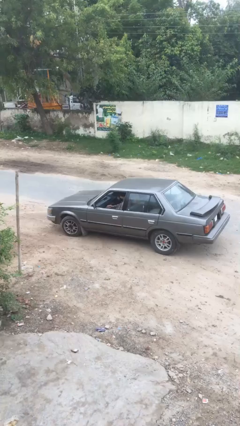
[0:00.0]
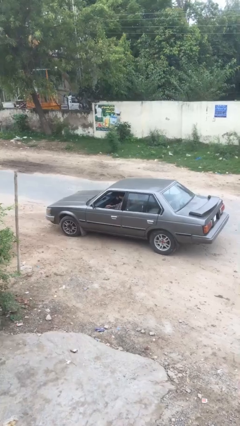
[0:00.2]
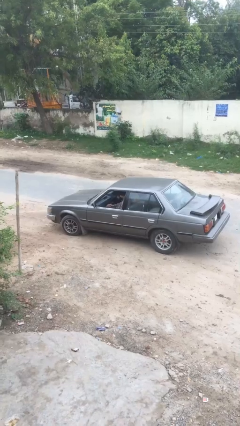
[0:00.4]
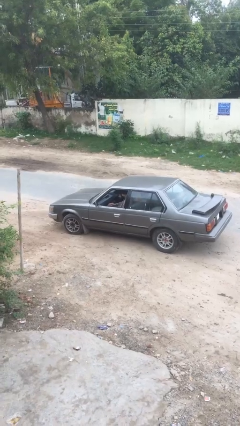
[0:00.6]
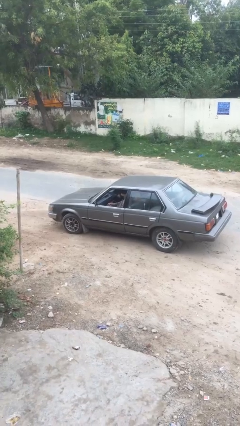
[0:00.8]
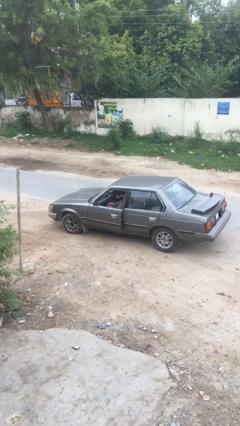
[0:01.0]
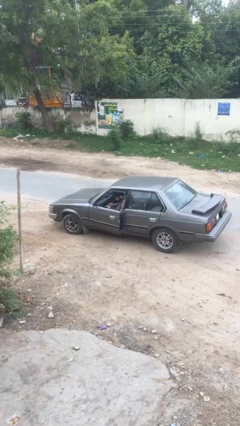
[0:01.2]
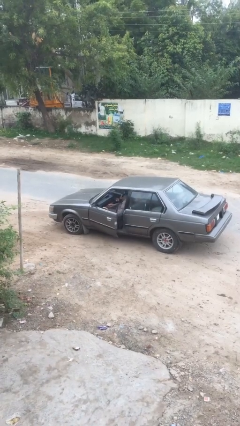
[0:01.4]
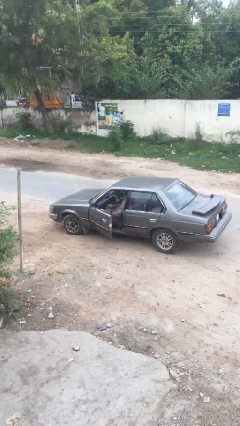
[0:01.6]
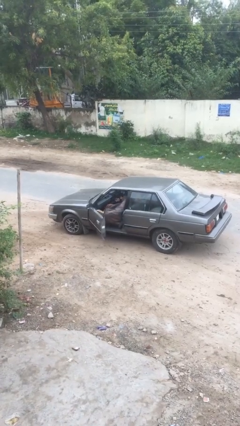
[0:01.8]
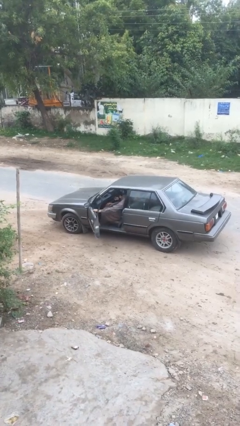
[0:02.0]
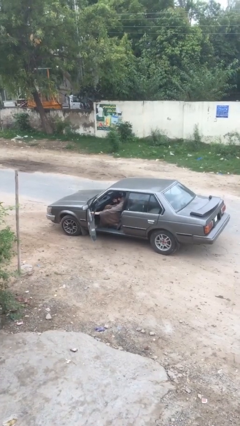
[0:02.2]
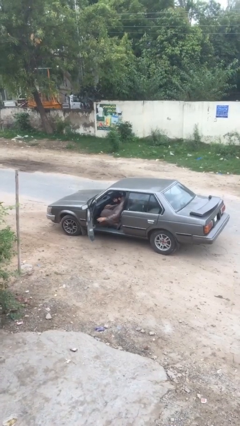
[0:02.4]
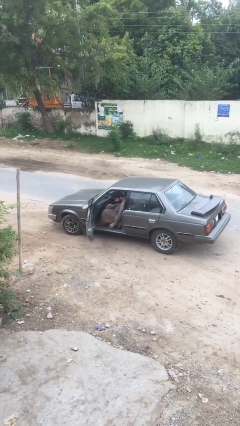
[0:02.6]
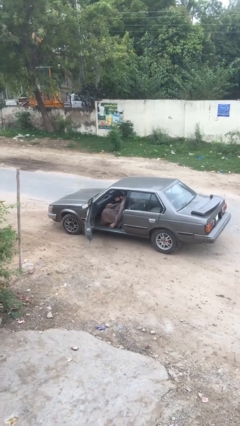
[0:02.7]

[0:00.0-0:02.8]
person opens car door

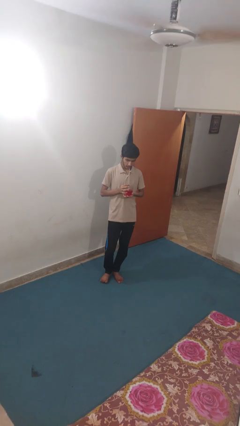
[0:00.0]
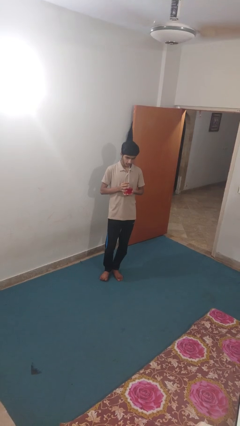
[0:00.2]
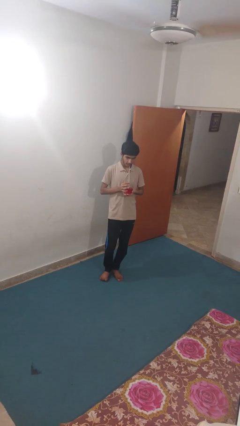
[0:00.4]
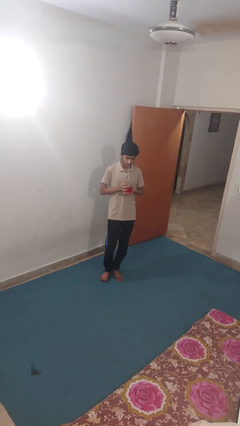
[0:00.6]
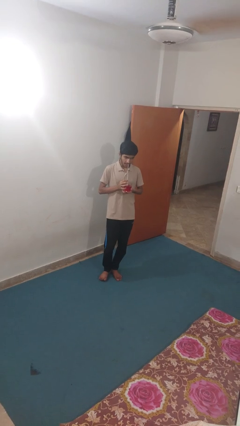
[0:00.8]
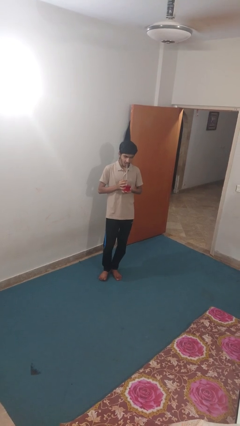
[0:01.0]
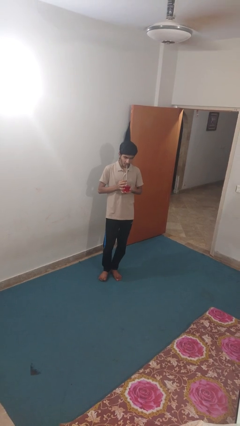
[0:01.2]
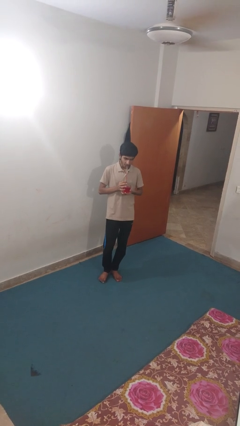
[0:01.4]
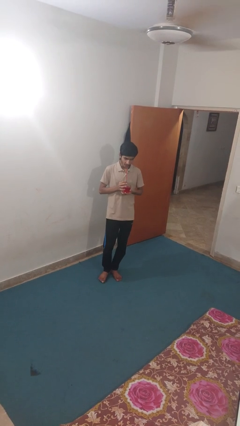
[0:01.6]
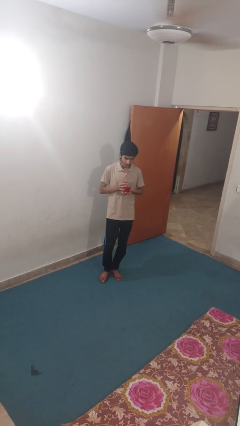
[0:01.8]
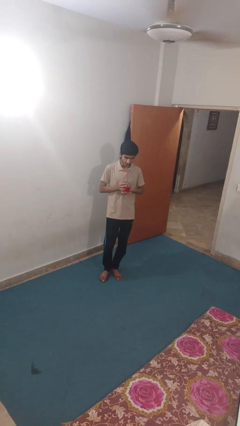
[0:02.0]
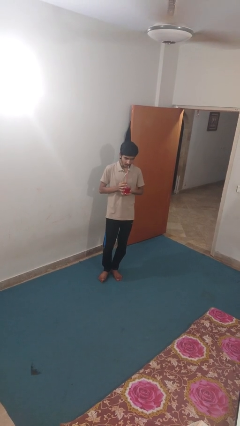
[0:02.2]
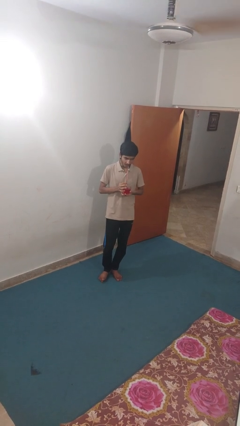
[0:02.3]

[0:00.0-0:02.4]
person drinks from straw

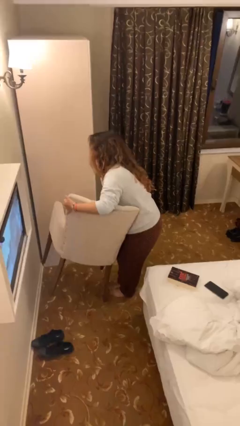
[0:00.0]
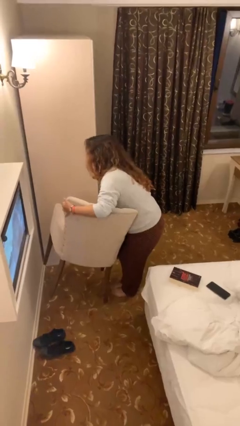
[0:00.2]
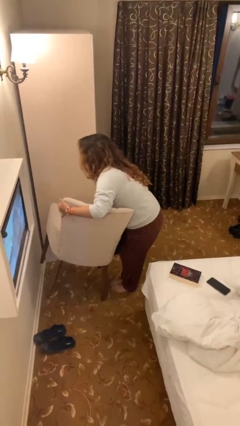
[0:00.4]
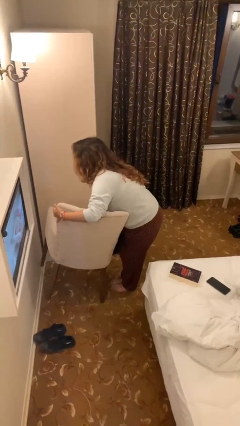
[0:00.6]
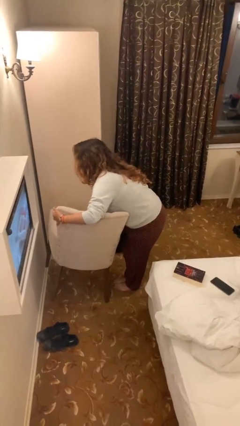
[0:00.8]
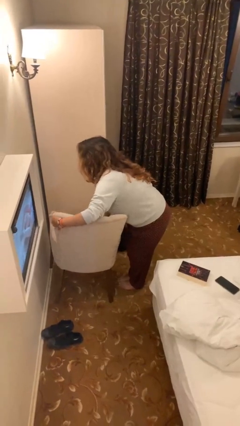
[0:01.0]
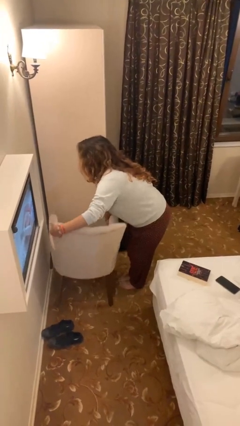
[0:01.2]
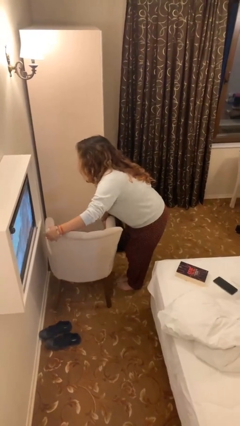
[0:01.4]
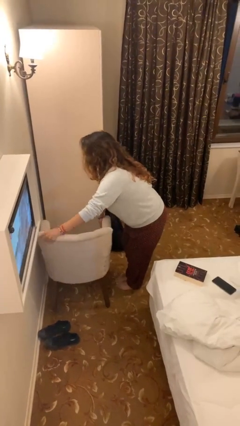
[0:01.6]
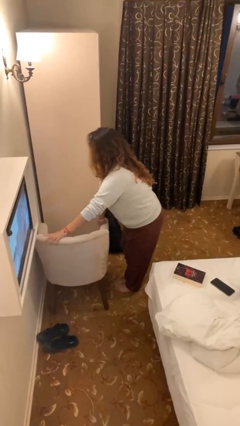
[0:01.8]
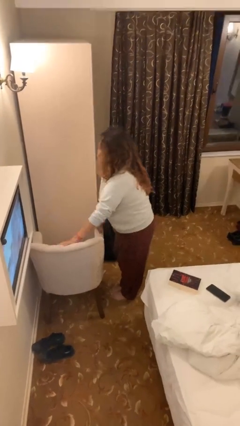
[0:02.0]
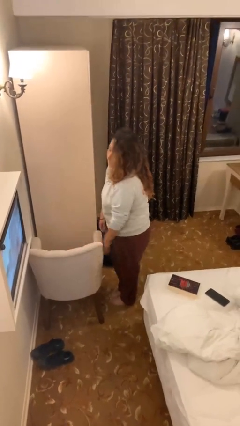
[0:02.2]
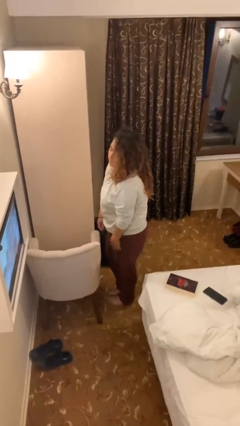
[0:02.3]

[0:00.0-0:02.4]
person puts down object on floor

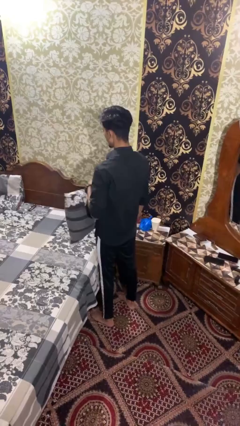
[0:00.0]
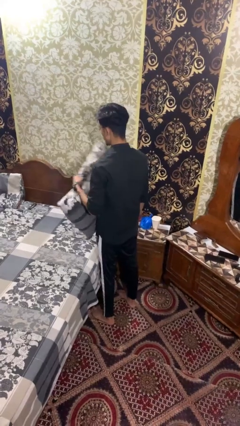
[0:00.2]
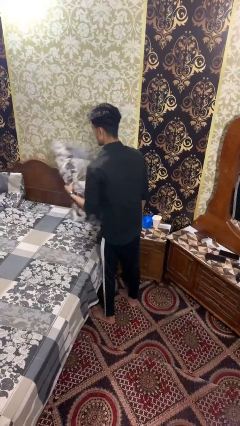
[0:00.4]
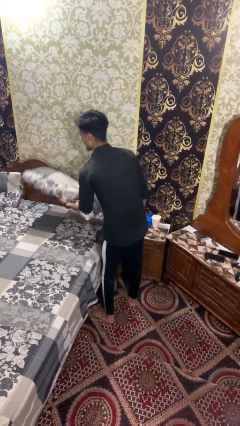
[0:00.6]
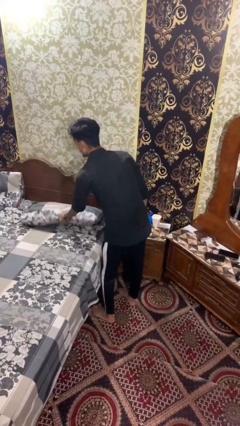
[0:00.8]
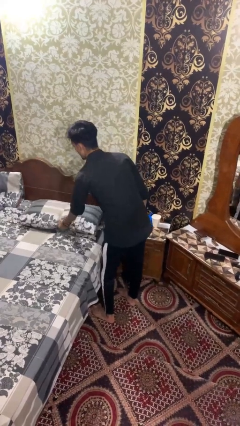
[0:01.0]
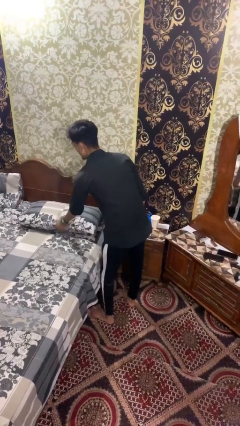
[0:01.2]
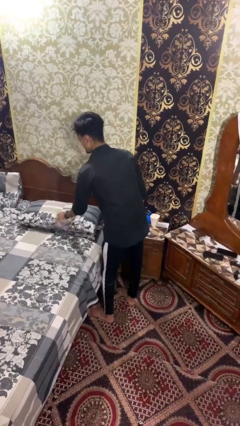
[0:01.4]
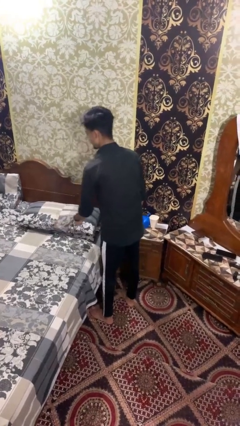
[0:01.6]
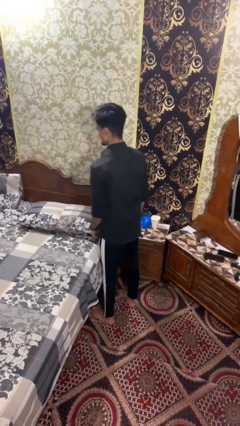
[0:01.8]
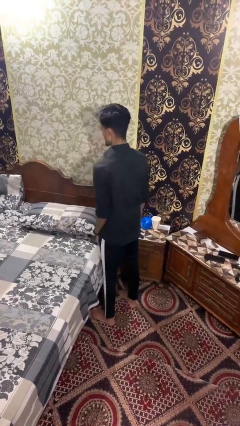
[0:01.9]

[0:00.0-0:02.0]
person puts down object on bed

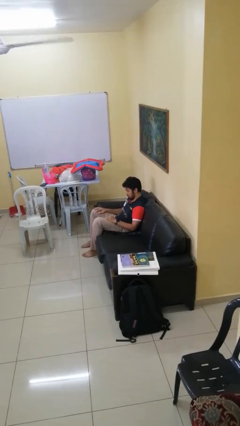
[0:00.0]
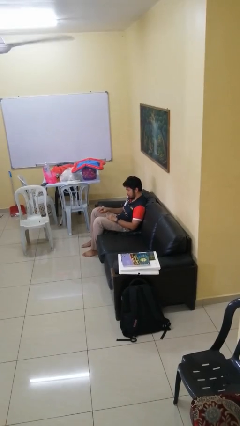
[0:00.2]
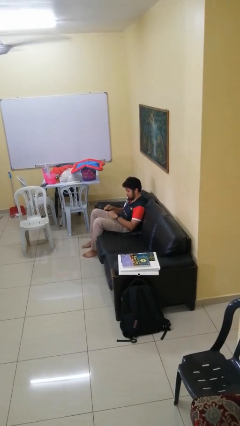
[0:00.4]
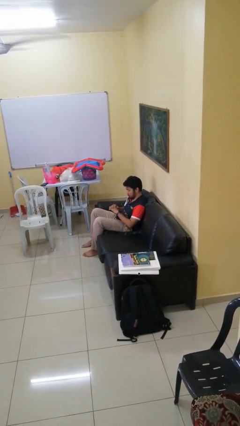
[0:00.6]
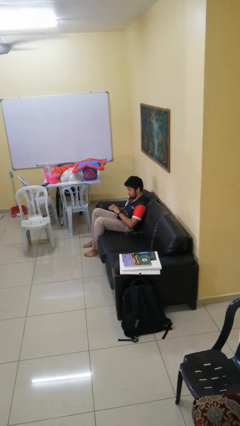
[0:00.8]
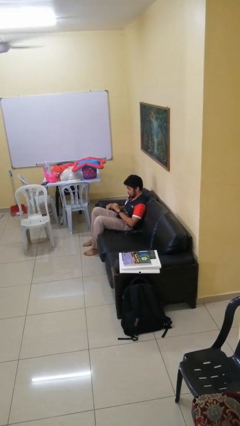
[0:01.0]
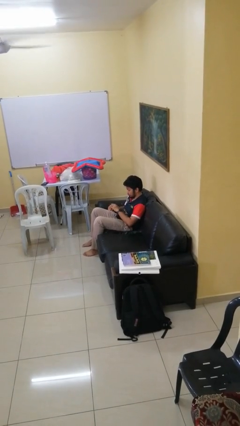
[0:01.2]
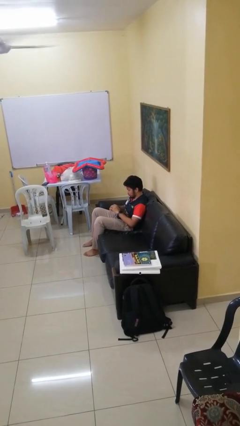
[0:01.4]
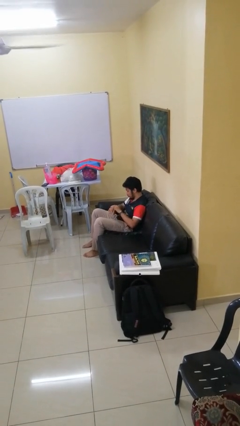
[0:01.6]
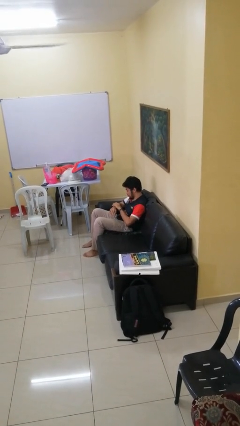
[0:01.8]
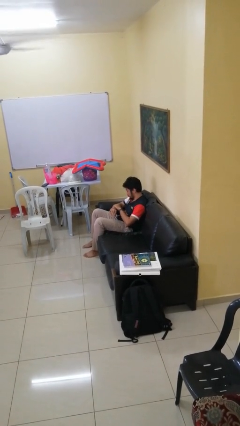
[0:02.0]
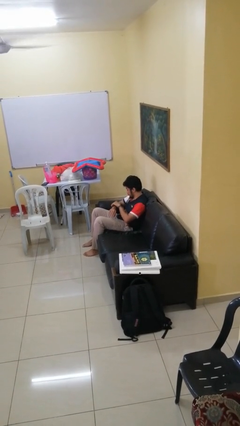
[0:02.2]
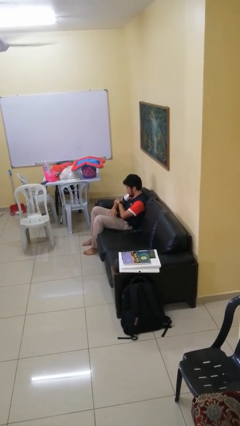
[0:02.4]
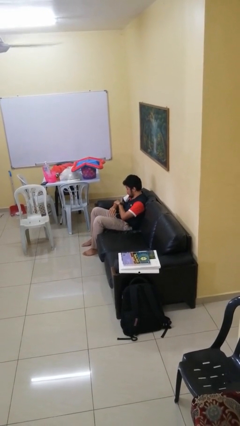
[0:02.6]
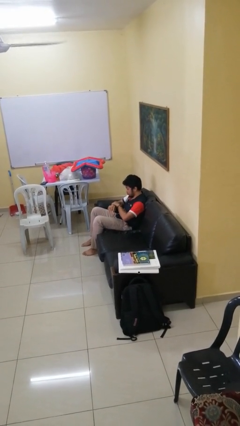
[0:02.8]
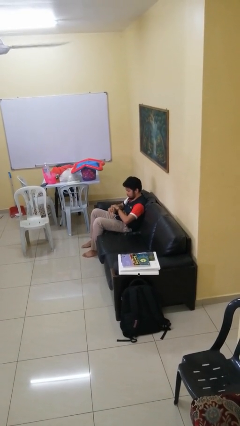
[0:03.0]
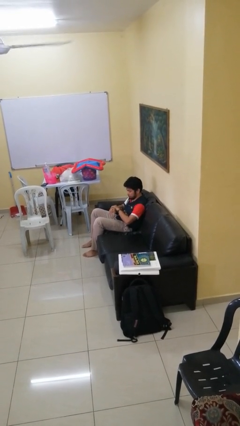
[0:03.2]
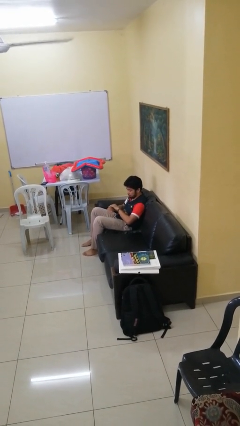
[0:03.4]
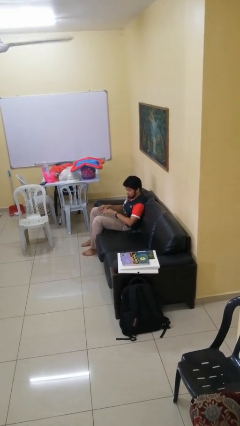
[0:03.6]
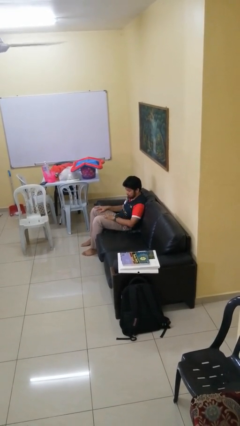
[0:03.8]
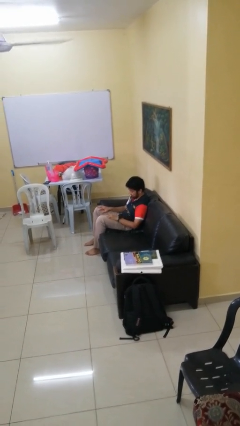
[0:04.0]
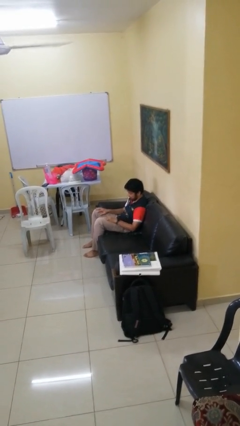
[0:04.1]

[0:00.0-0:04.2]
person looks at hands in lap

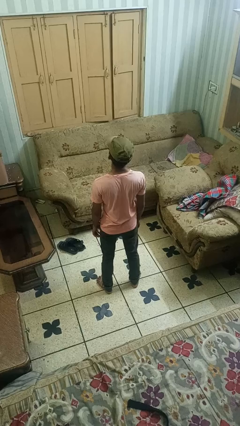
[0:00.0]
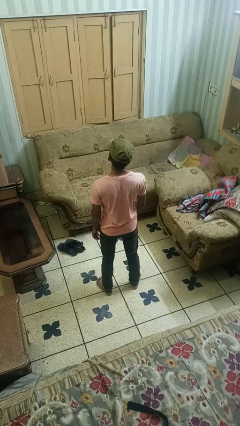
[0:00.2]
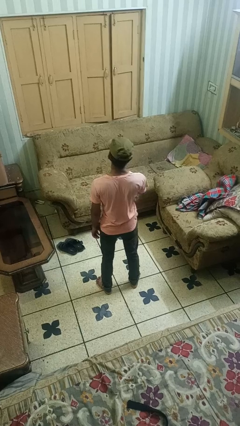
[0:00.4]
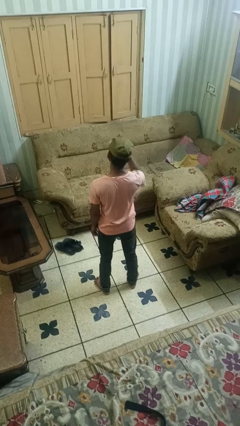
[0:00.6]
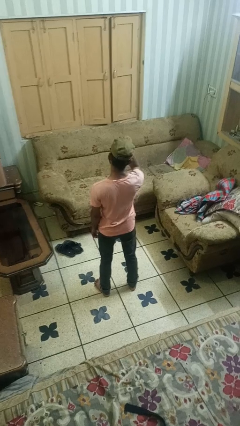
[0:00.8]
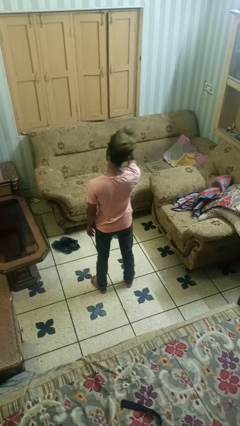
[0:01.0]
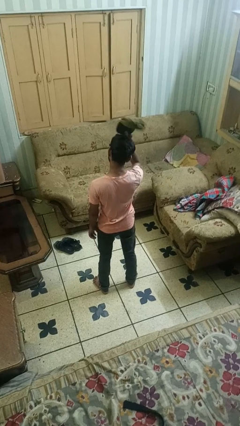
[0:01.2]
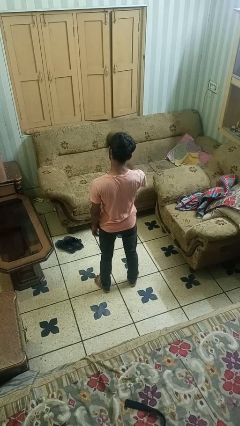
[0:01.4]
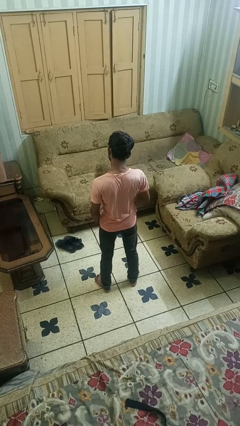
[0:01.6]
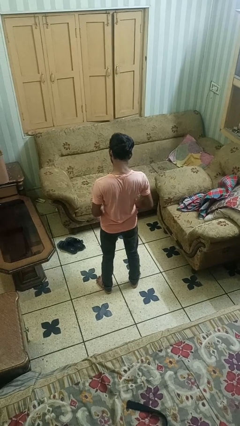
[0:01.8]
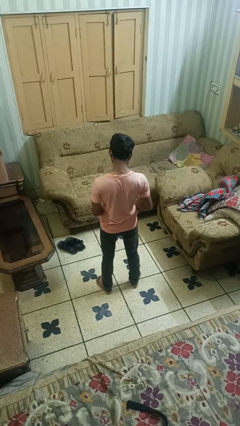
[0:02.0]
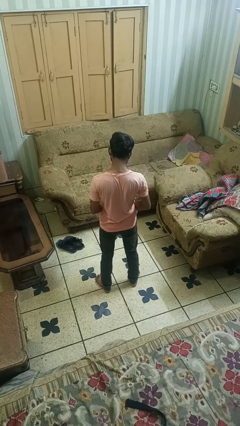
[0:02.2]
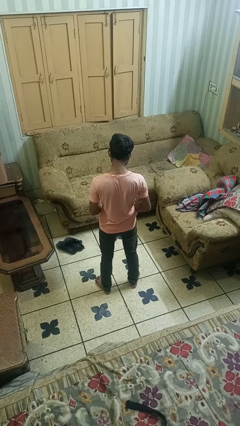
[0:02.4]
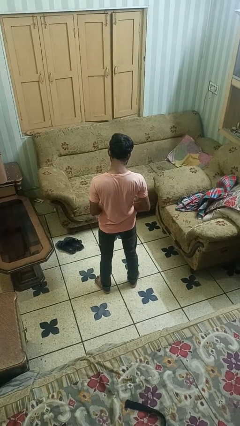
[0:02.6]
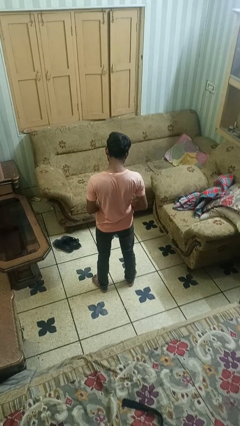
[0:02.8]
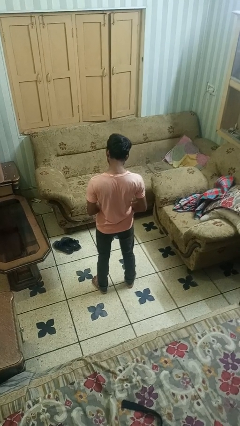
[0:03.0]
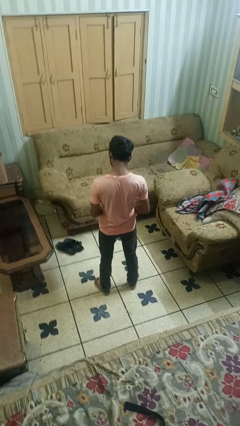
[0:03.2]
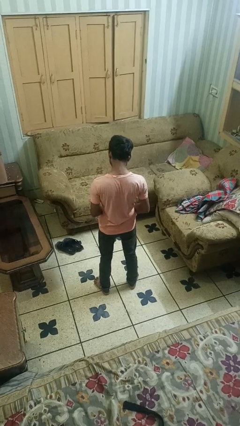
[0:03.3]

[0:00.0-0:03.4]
person takes off hat

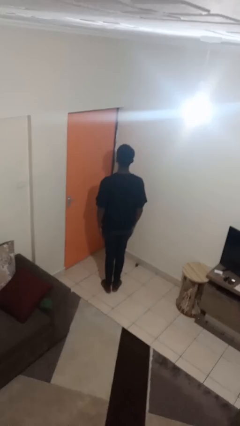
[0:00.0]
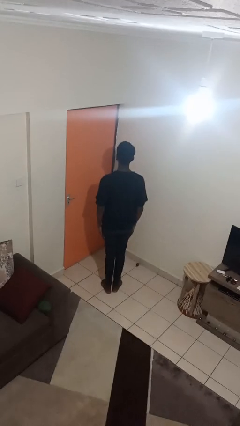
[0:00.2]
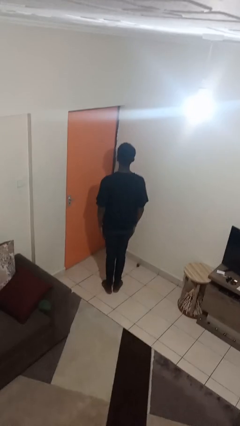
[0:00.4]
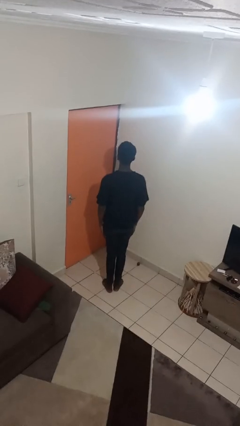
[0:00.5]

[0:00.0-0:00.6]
person exercises with jumping jacks
